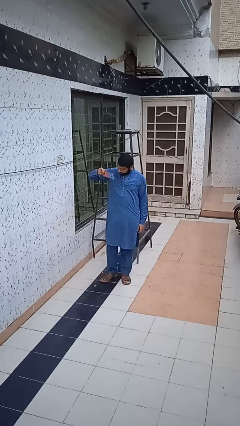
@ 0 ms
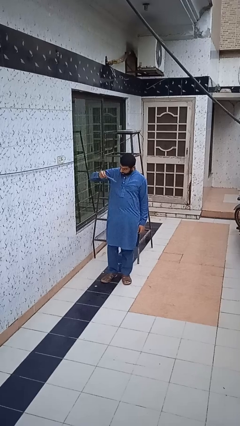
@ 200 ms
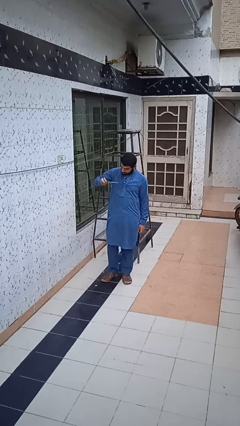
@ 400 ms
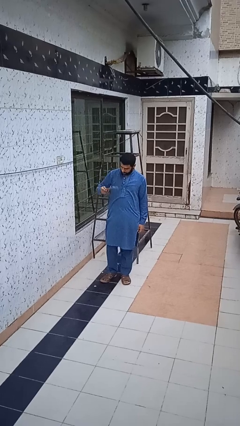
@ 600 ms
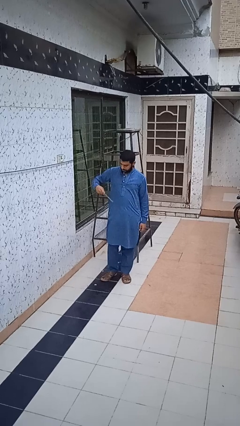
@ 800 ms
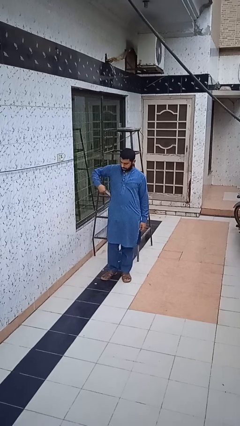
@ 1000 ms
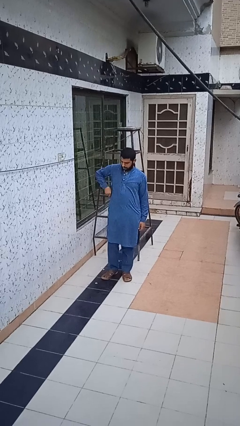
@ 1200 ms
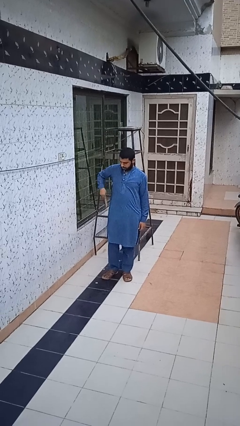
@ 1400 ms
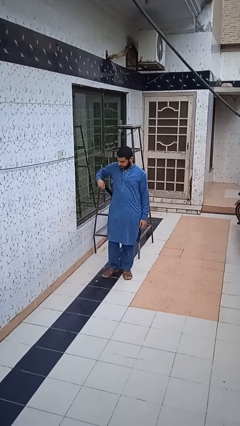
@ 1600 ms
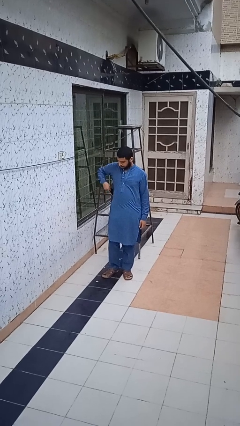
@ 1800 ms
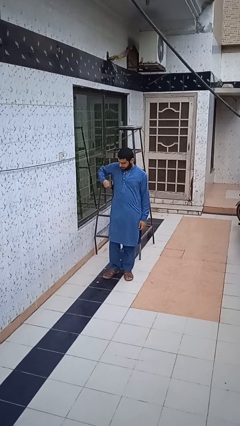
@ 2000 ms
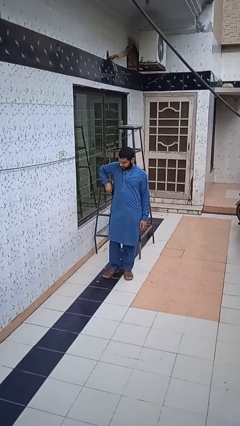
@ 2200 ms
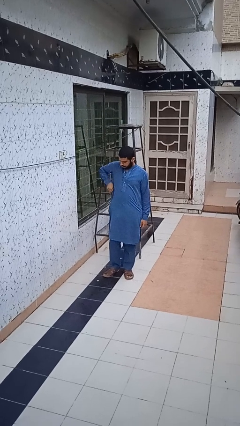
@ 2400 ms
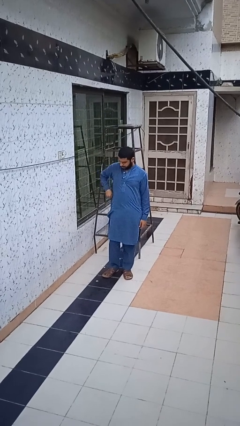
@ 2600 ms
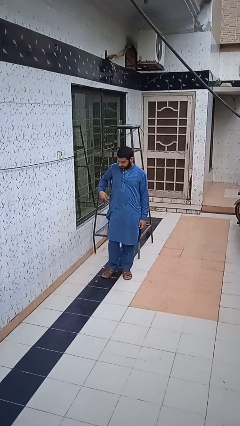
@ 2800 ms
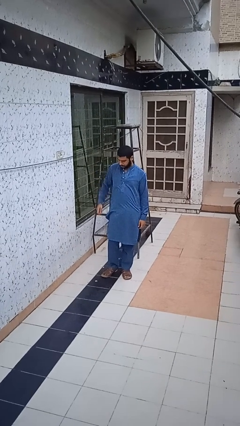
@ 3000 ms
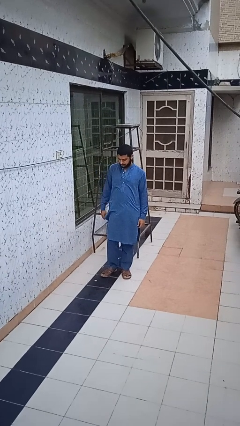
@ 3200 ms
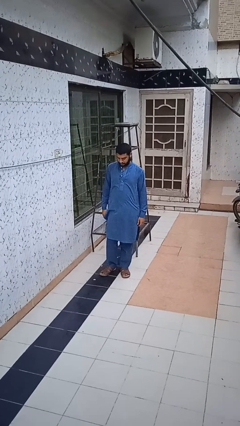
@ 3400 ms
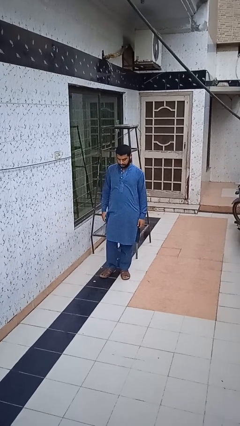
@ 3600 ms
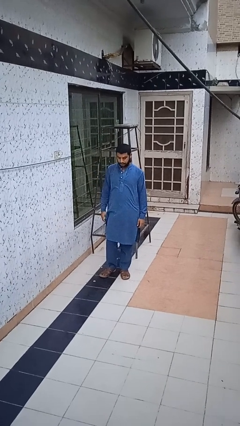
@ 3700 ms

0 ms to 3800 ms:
person puts phone into pocket

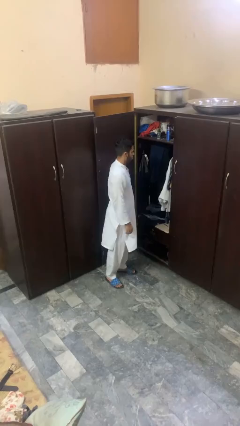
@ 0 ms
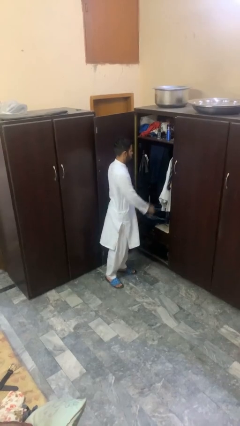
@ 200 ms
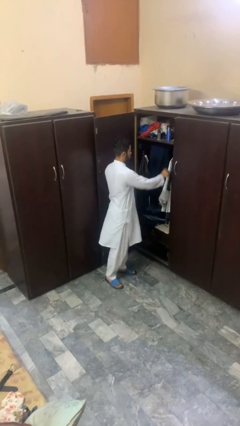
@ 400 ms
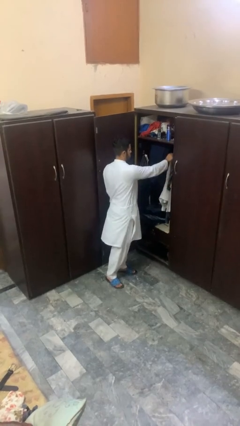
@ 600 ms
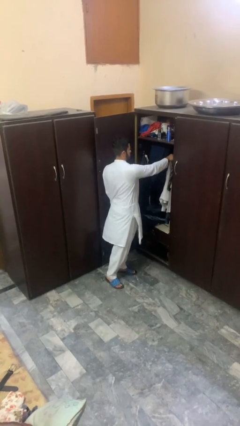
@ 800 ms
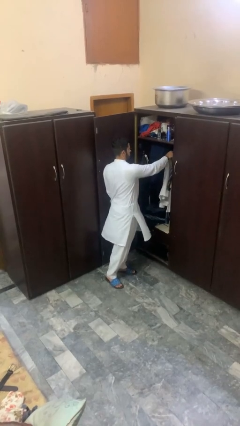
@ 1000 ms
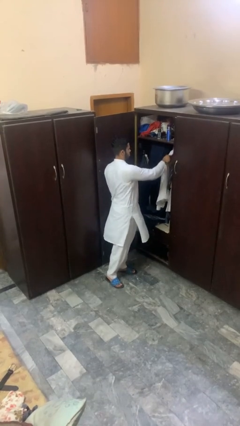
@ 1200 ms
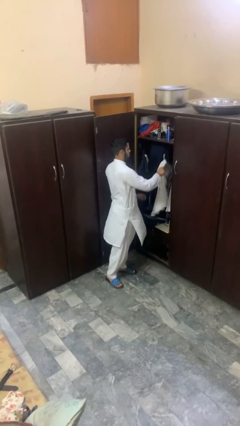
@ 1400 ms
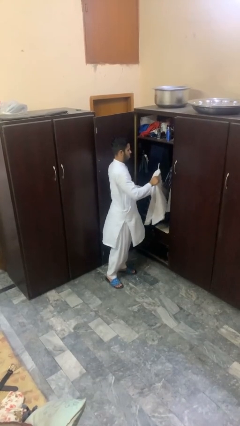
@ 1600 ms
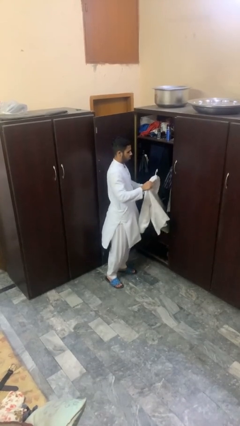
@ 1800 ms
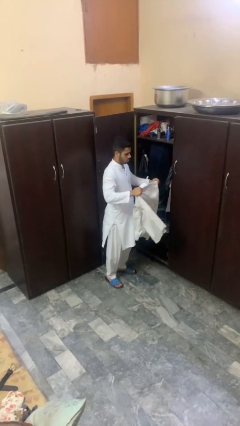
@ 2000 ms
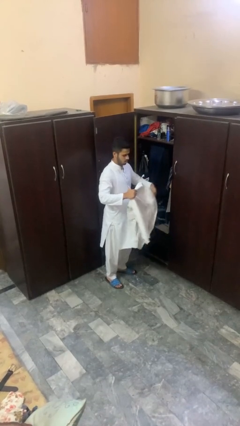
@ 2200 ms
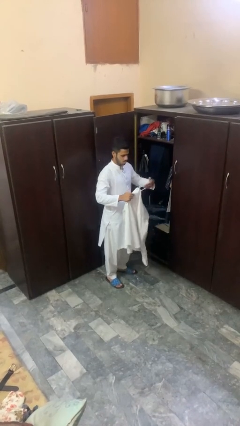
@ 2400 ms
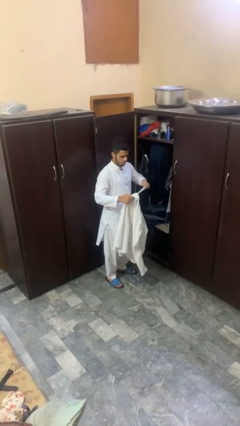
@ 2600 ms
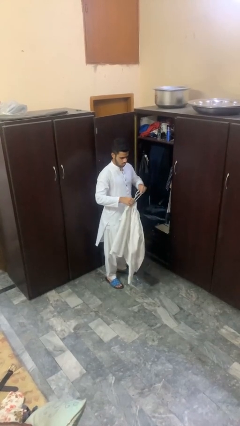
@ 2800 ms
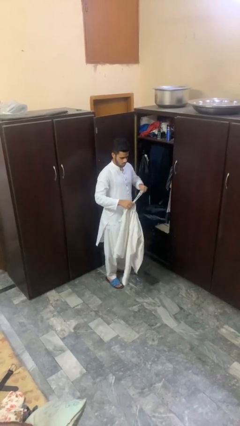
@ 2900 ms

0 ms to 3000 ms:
person takes clothes from closet

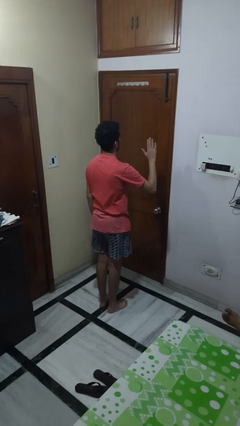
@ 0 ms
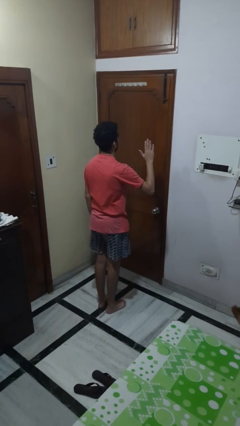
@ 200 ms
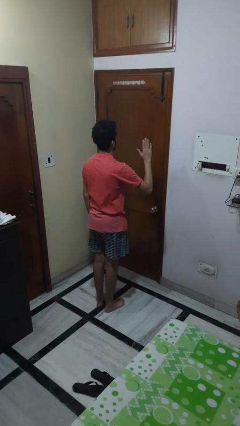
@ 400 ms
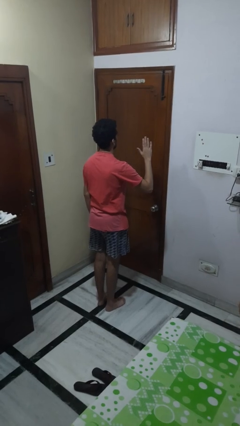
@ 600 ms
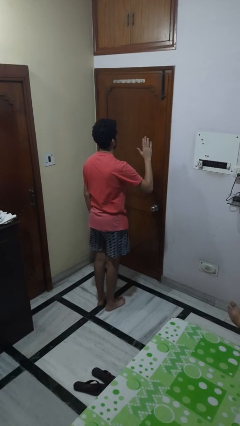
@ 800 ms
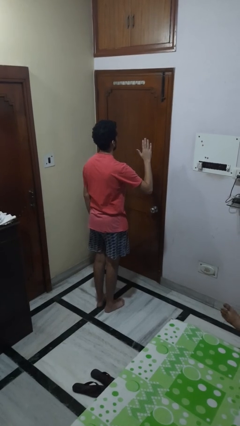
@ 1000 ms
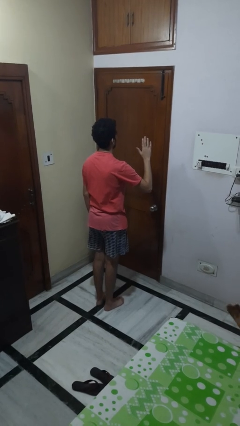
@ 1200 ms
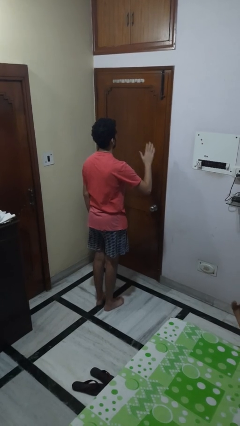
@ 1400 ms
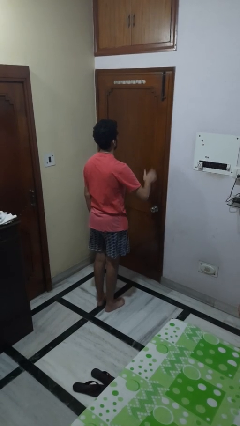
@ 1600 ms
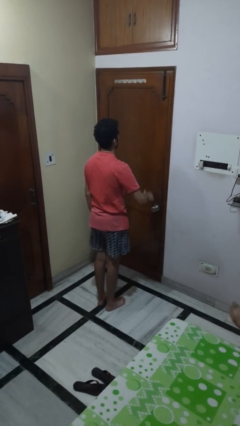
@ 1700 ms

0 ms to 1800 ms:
person gestures stop

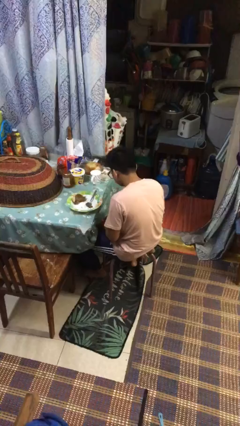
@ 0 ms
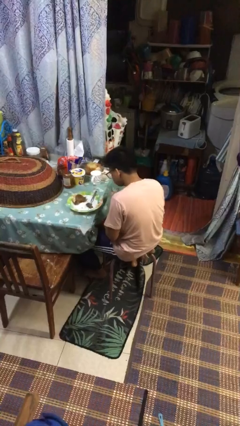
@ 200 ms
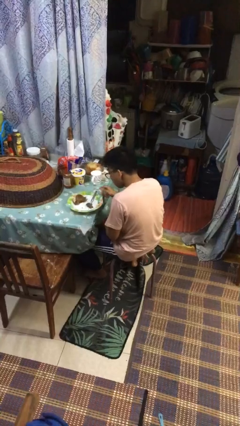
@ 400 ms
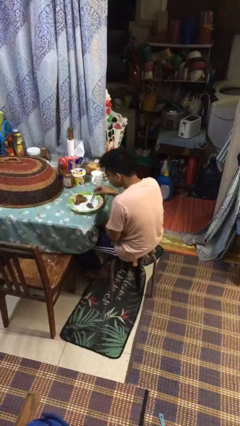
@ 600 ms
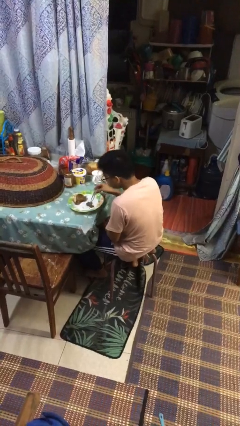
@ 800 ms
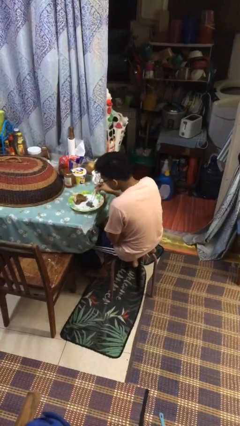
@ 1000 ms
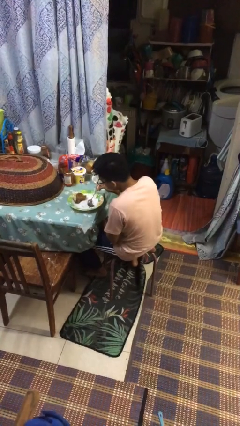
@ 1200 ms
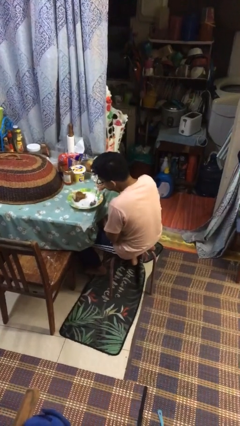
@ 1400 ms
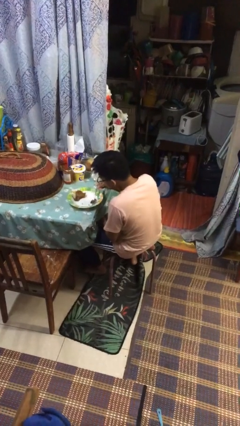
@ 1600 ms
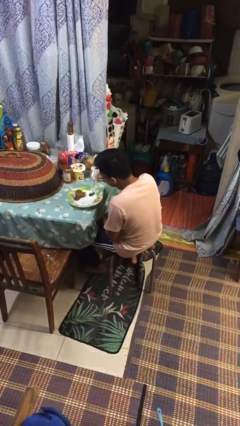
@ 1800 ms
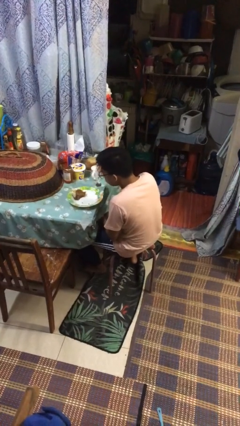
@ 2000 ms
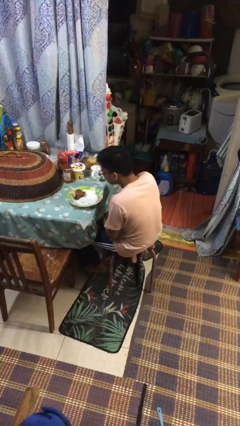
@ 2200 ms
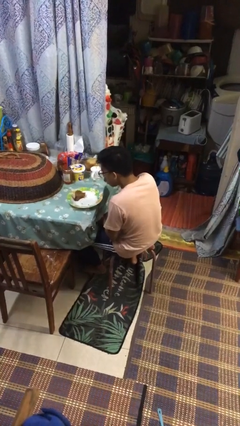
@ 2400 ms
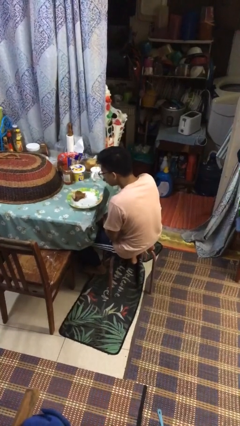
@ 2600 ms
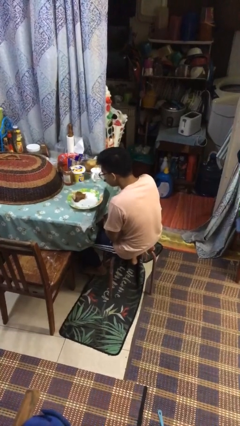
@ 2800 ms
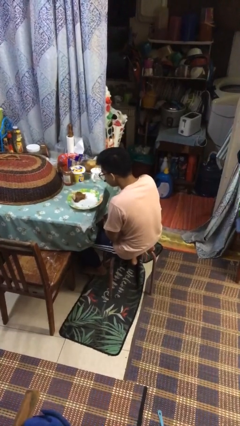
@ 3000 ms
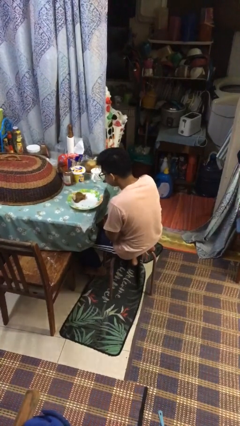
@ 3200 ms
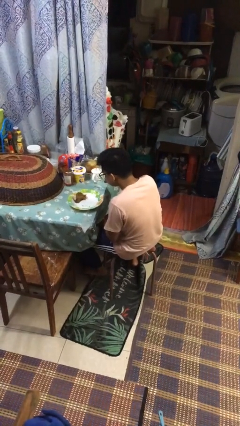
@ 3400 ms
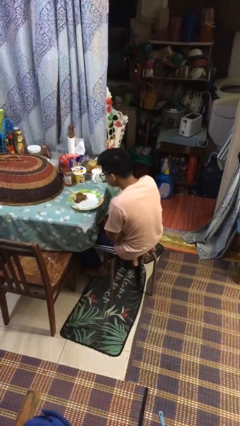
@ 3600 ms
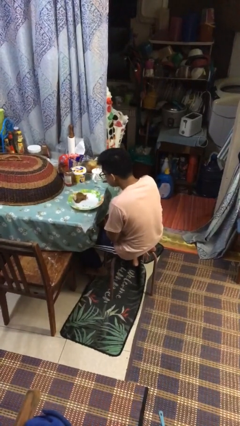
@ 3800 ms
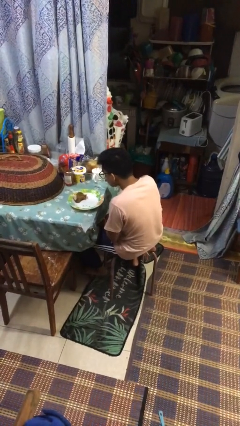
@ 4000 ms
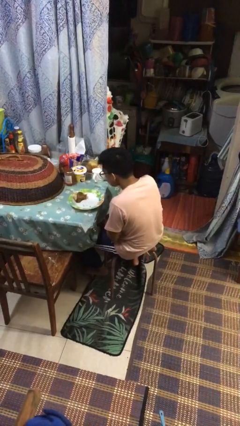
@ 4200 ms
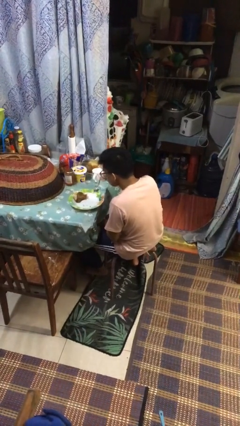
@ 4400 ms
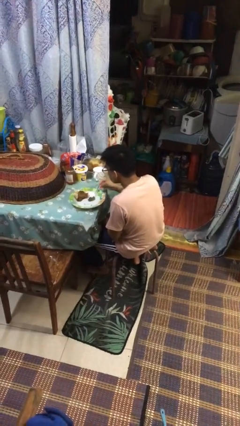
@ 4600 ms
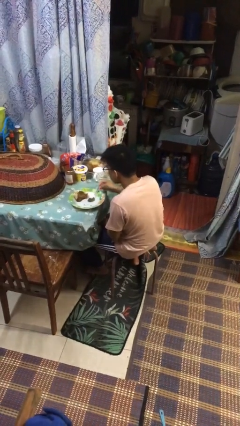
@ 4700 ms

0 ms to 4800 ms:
person eats with utensil

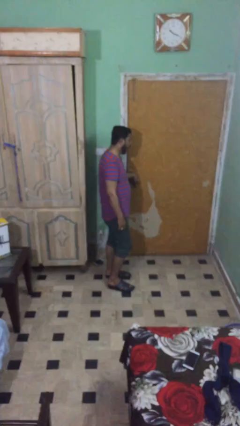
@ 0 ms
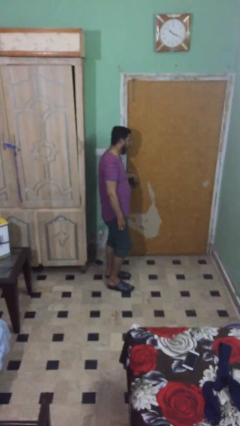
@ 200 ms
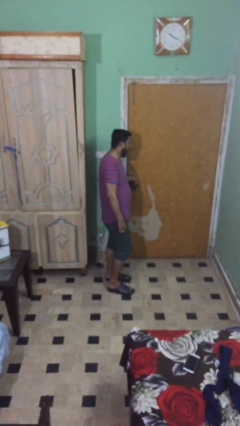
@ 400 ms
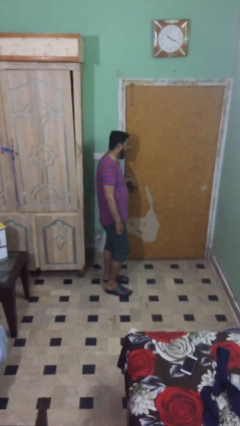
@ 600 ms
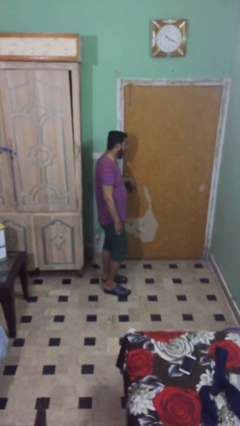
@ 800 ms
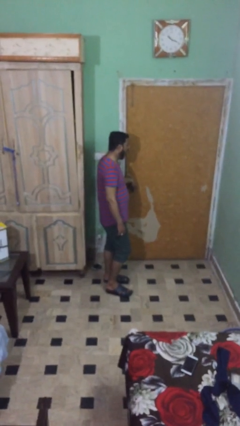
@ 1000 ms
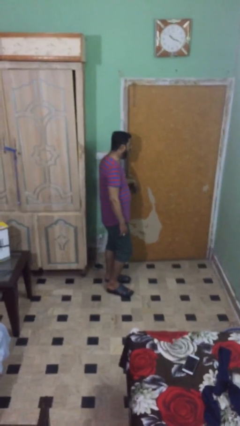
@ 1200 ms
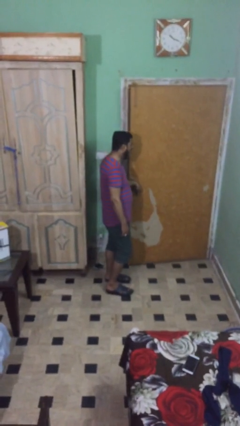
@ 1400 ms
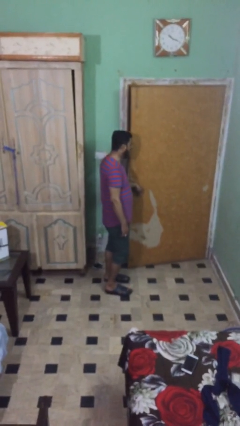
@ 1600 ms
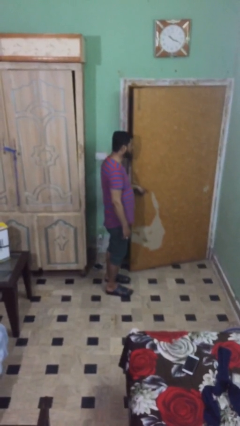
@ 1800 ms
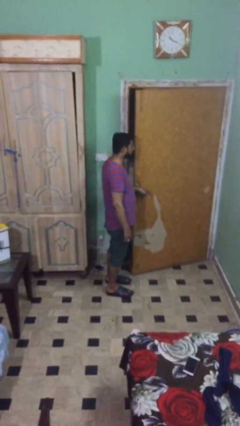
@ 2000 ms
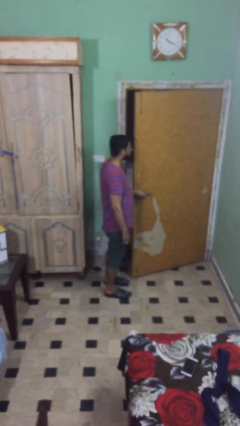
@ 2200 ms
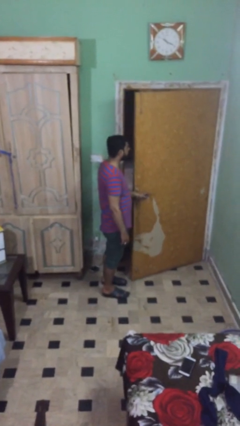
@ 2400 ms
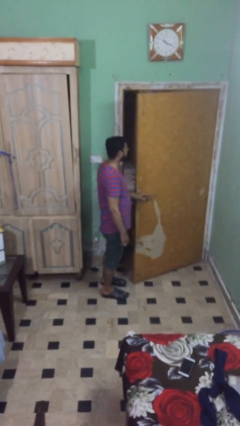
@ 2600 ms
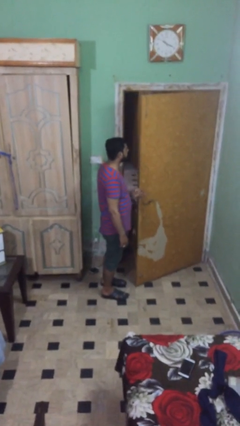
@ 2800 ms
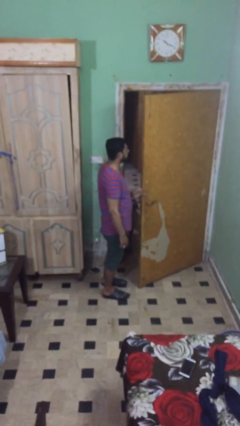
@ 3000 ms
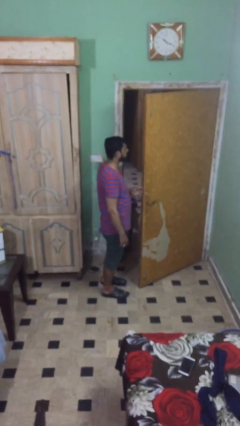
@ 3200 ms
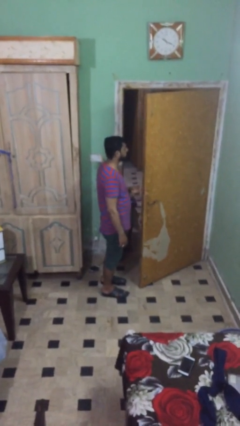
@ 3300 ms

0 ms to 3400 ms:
person opens facility door

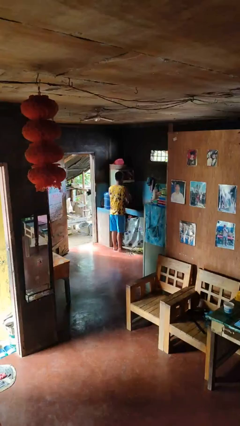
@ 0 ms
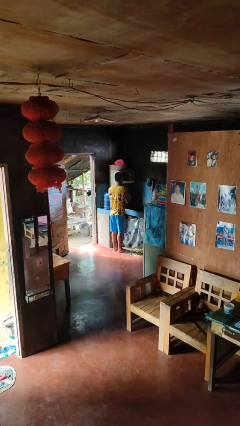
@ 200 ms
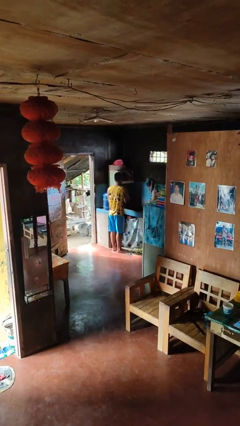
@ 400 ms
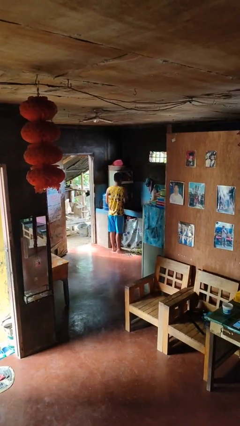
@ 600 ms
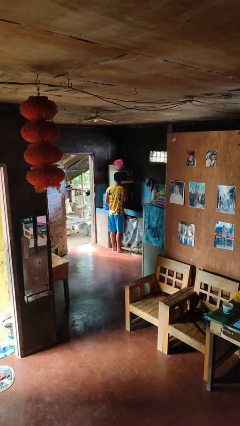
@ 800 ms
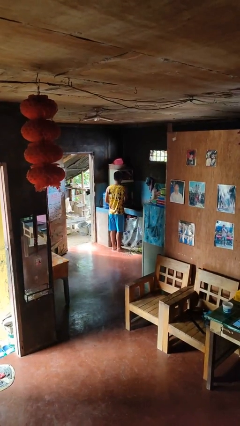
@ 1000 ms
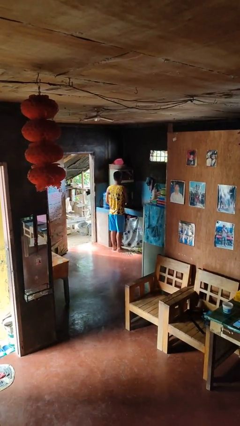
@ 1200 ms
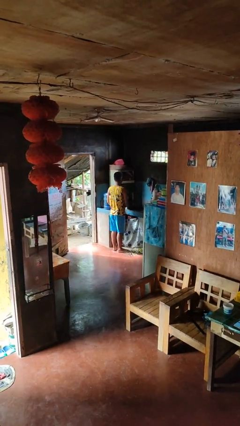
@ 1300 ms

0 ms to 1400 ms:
person closes dishwasher
